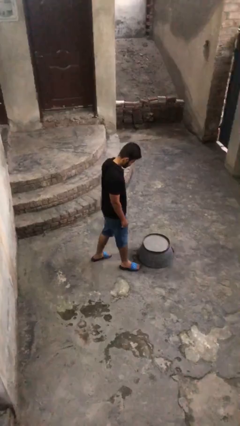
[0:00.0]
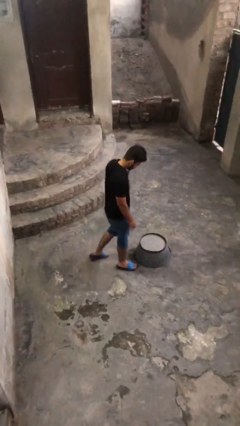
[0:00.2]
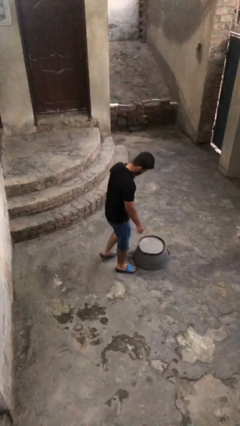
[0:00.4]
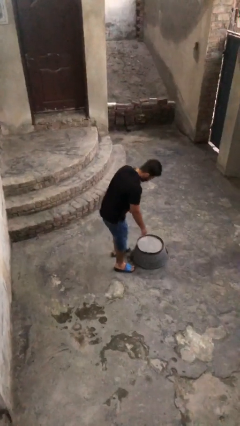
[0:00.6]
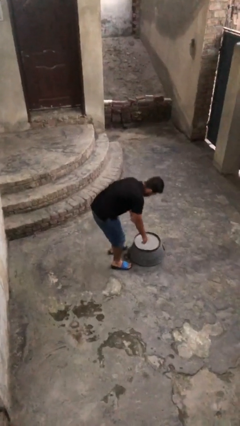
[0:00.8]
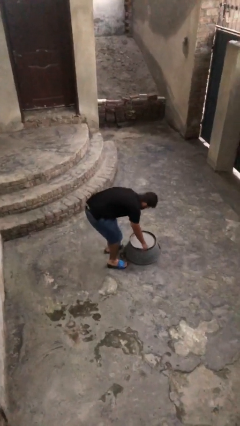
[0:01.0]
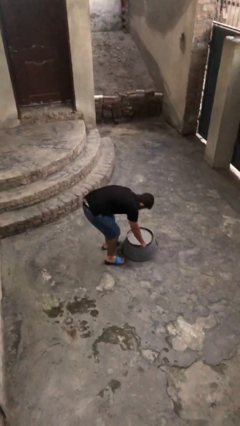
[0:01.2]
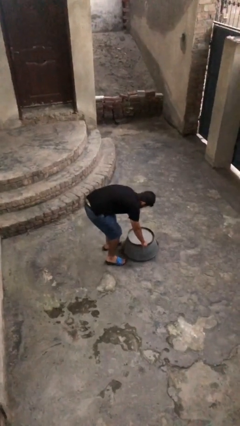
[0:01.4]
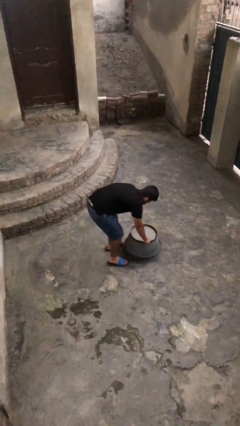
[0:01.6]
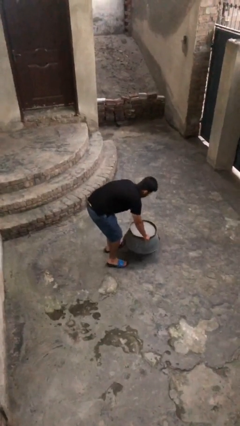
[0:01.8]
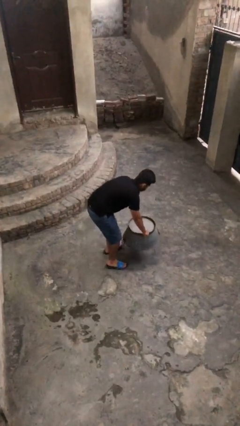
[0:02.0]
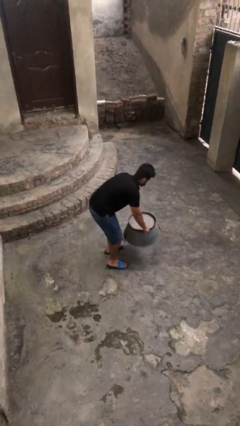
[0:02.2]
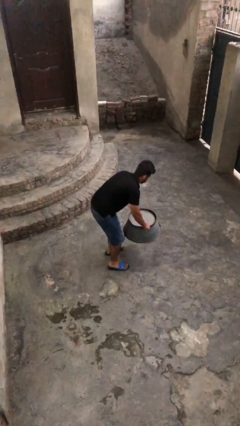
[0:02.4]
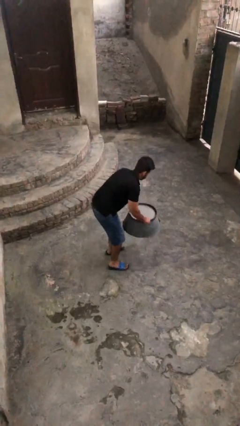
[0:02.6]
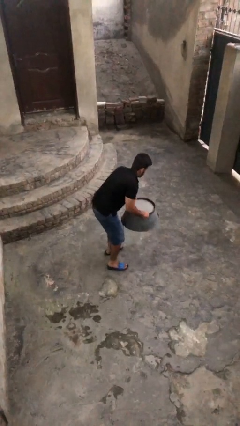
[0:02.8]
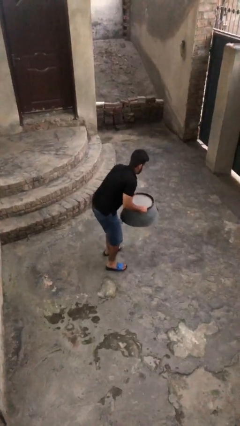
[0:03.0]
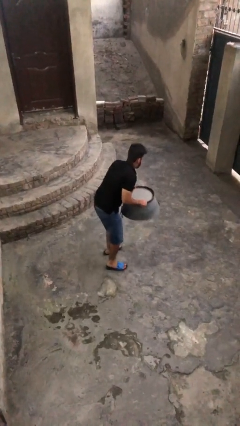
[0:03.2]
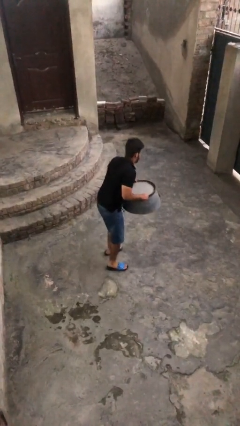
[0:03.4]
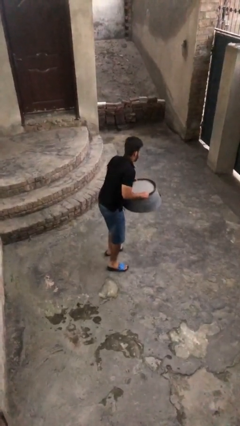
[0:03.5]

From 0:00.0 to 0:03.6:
person picks up object from floor

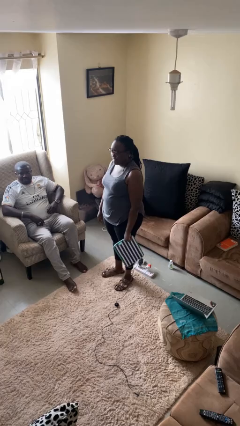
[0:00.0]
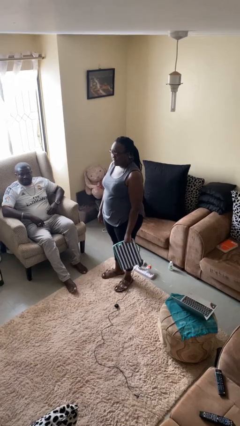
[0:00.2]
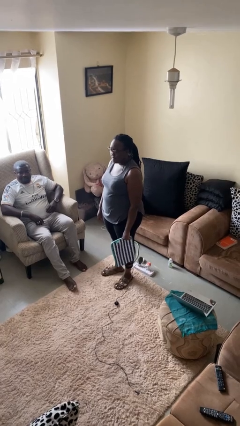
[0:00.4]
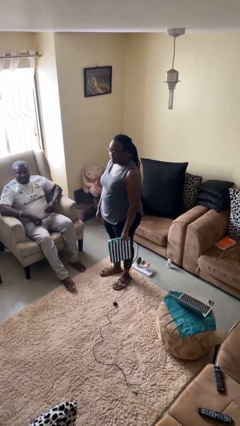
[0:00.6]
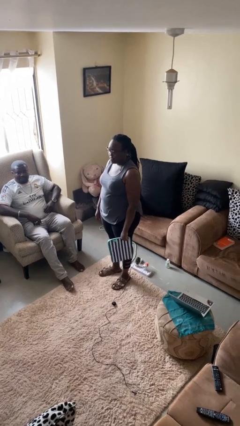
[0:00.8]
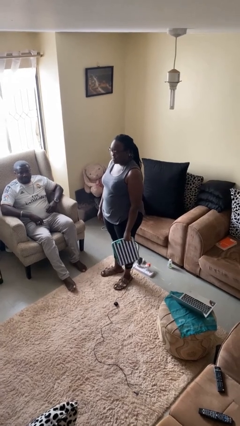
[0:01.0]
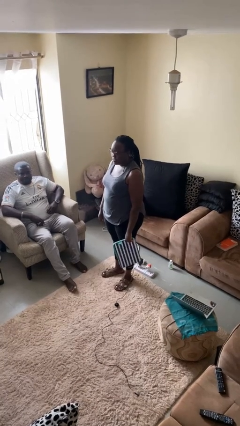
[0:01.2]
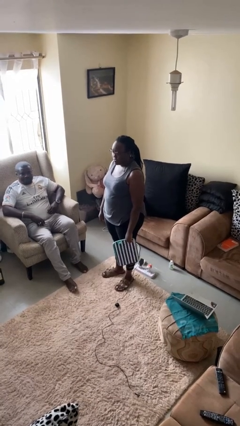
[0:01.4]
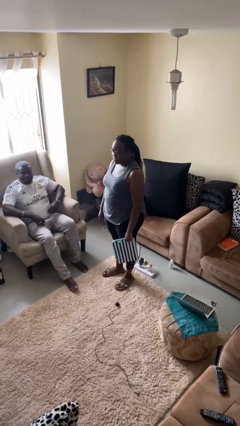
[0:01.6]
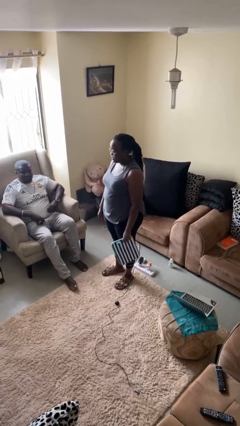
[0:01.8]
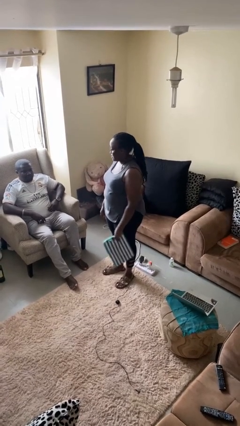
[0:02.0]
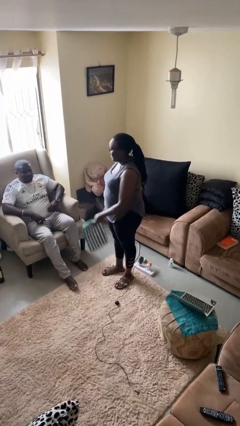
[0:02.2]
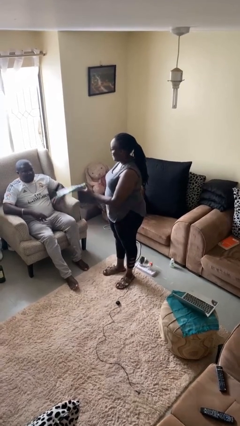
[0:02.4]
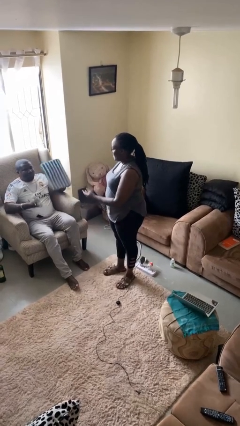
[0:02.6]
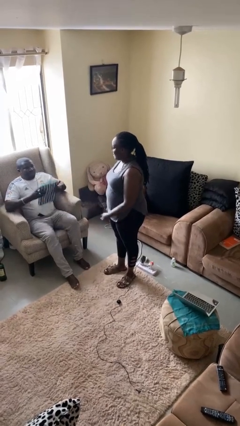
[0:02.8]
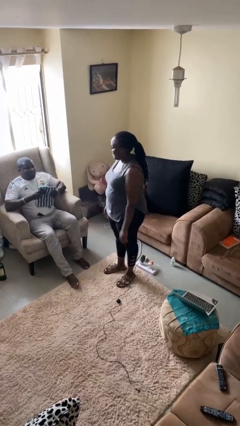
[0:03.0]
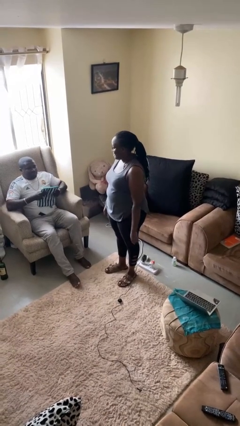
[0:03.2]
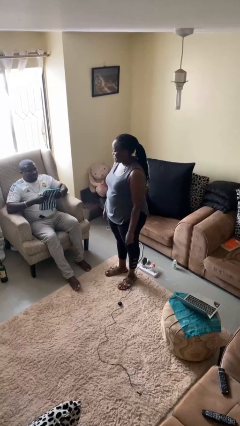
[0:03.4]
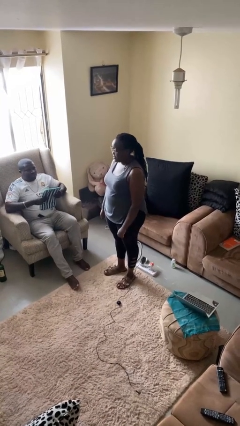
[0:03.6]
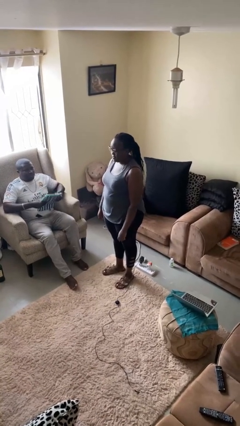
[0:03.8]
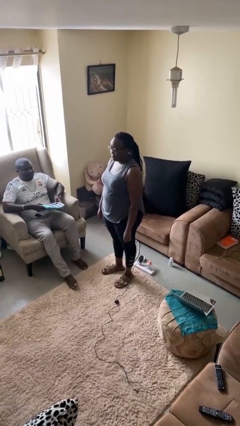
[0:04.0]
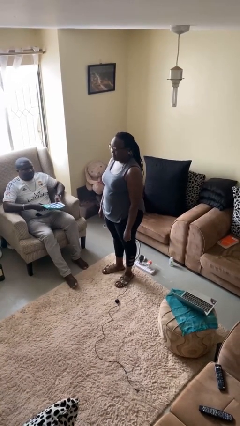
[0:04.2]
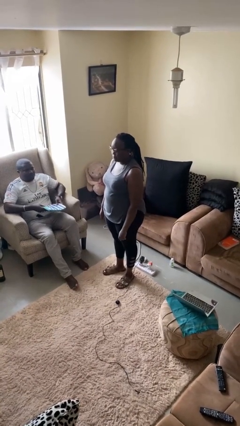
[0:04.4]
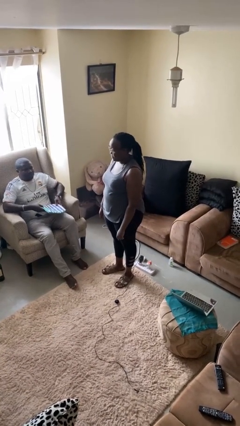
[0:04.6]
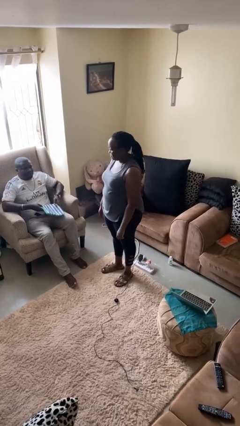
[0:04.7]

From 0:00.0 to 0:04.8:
person throws object to person

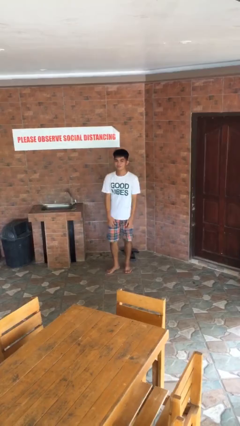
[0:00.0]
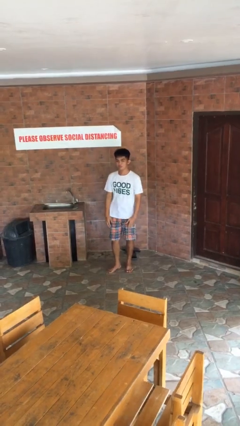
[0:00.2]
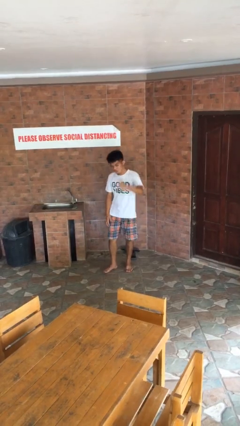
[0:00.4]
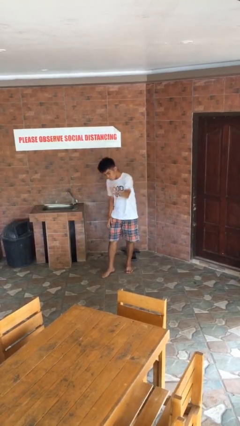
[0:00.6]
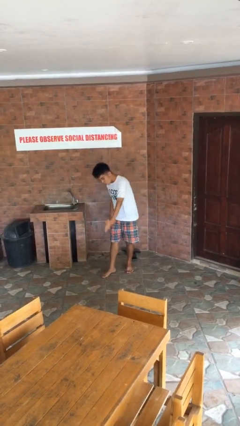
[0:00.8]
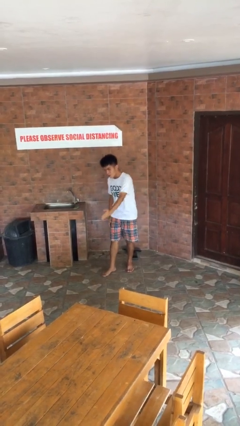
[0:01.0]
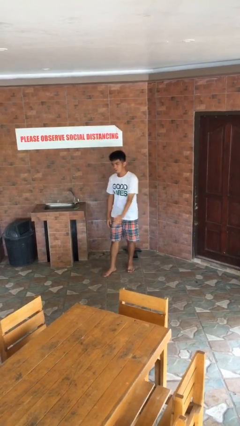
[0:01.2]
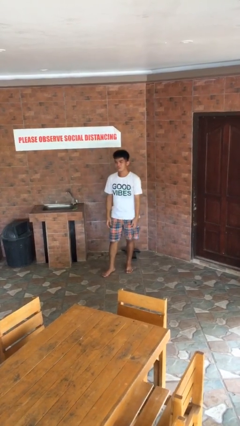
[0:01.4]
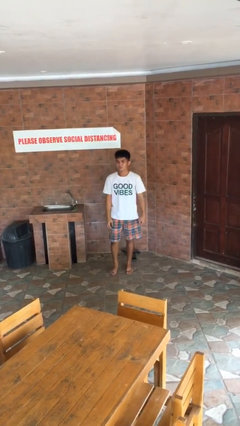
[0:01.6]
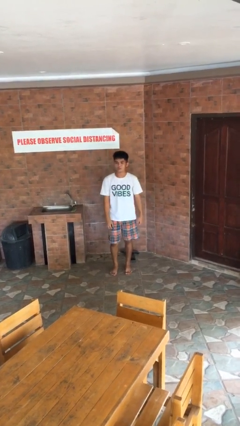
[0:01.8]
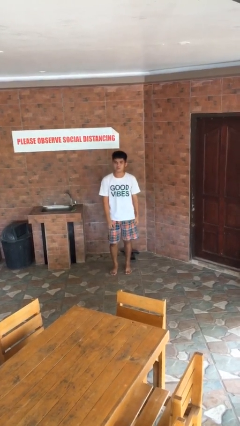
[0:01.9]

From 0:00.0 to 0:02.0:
person karate chop

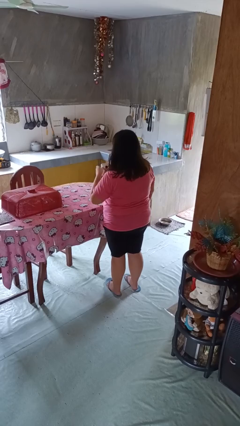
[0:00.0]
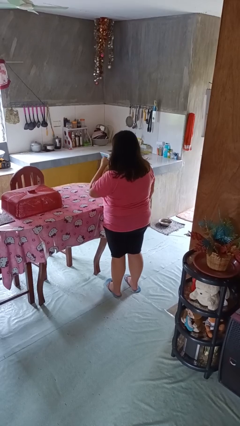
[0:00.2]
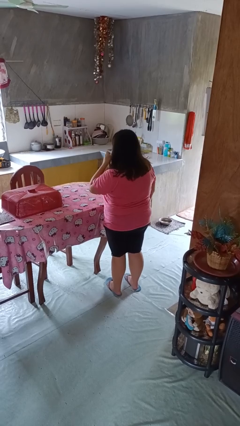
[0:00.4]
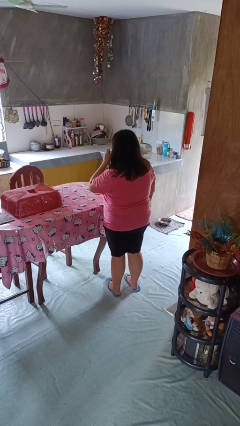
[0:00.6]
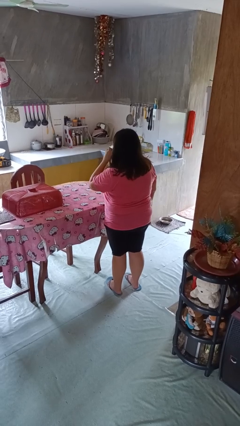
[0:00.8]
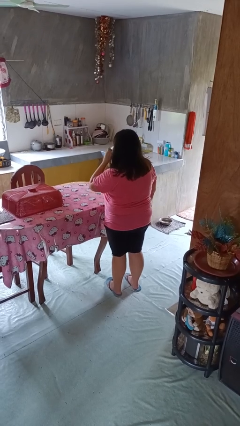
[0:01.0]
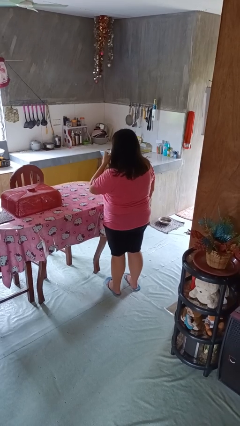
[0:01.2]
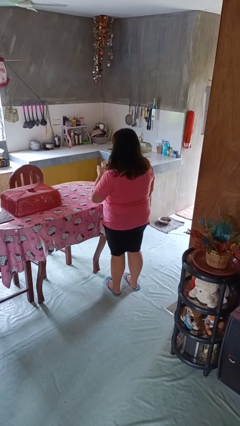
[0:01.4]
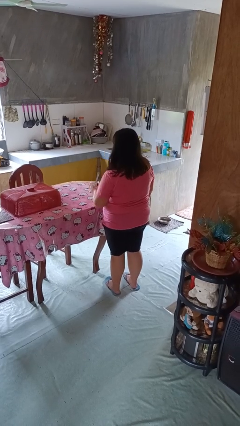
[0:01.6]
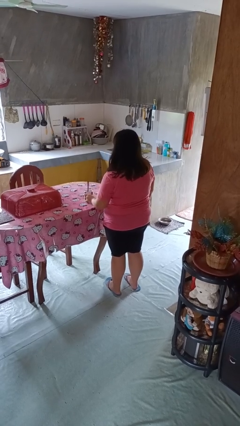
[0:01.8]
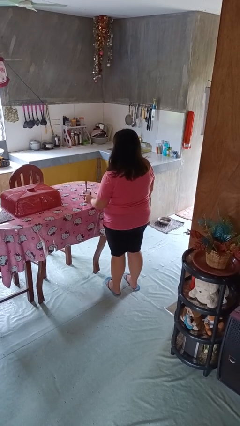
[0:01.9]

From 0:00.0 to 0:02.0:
person drinks from mug

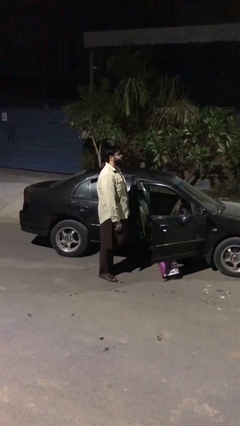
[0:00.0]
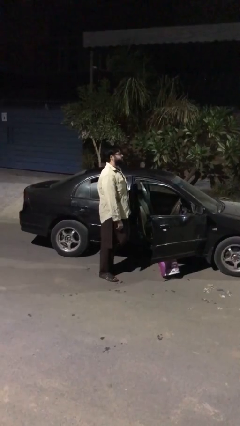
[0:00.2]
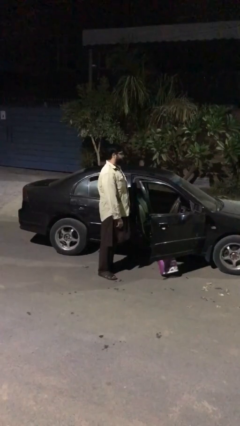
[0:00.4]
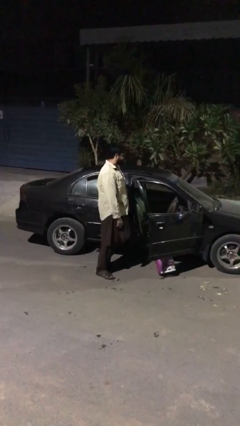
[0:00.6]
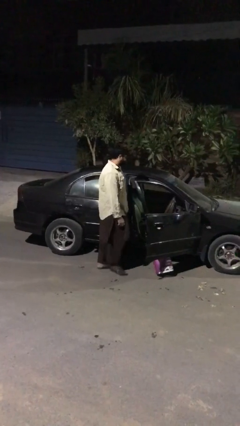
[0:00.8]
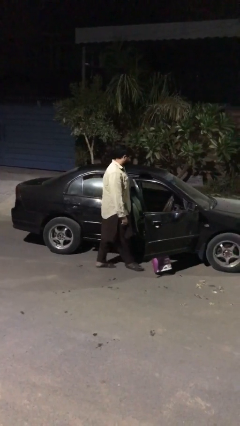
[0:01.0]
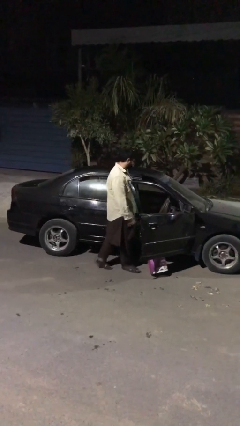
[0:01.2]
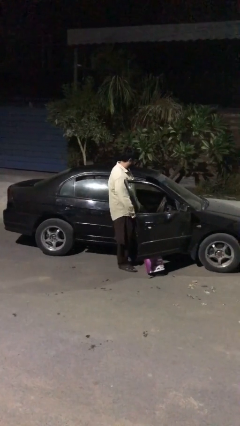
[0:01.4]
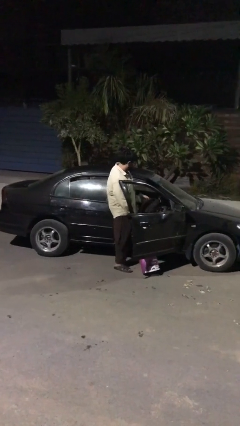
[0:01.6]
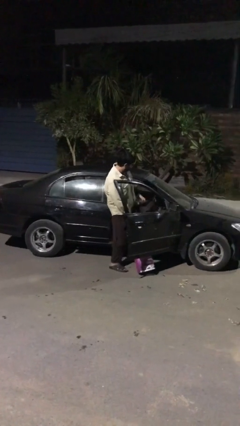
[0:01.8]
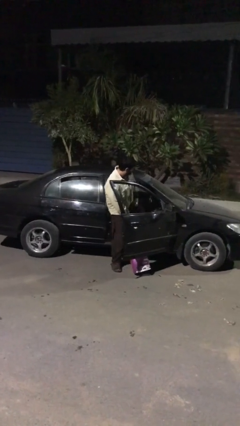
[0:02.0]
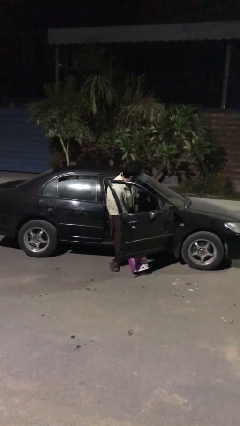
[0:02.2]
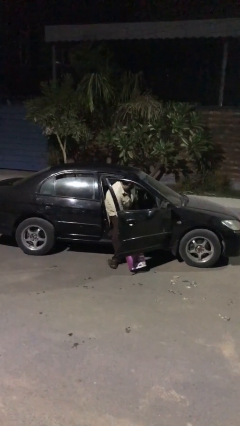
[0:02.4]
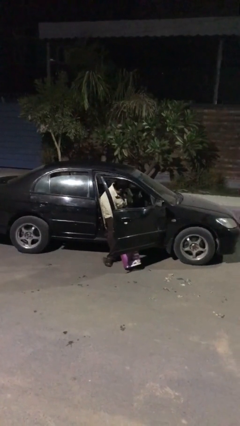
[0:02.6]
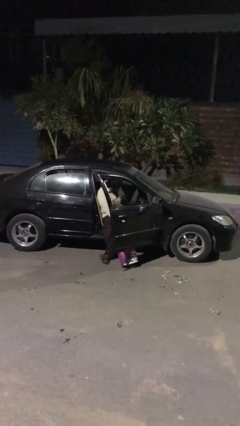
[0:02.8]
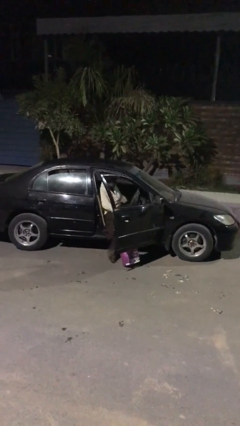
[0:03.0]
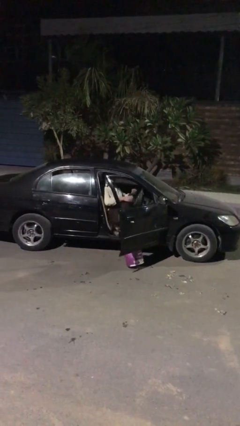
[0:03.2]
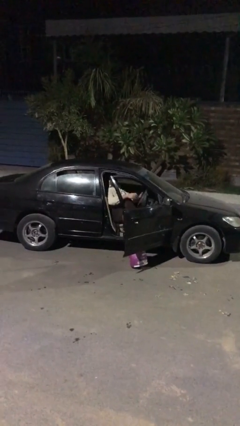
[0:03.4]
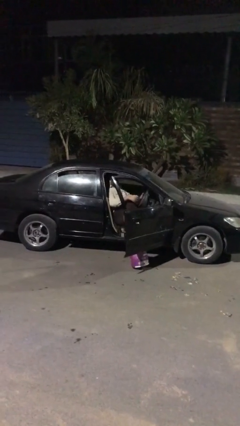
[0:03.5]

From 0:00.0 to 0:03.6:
person enters car

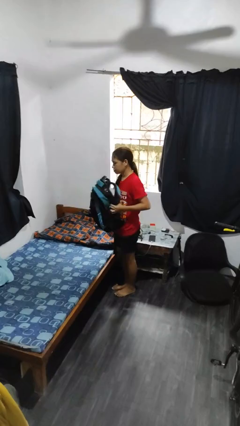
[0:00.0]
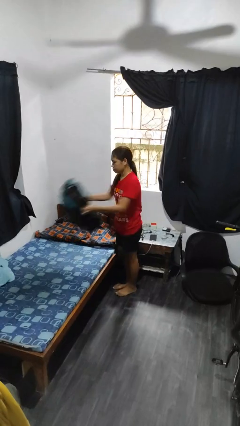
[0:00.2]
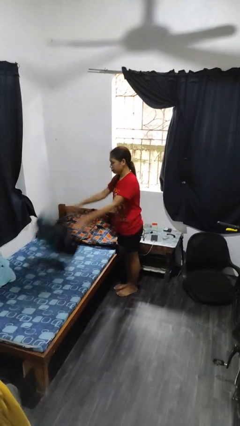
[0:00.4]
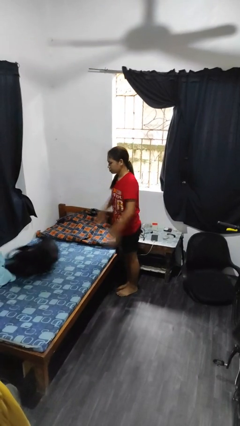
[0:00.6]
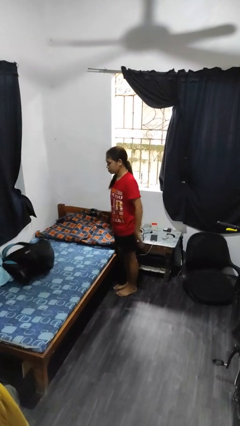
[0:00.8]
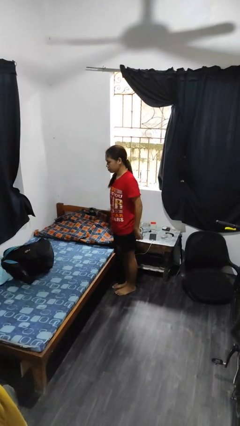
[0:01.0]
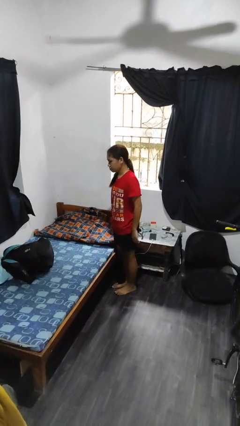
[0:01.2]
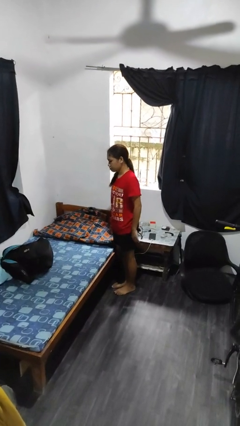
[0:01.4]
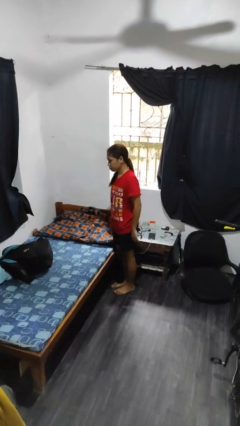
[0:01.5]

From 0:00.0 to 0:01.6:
person throws object on bed
